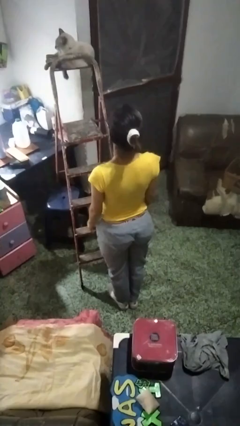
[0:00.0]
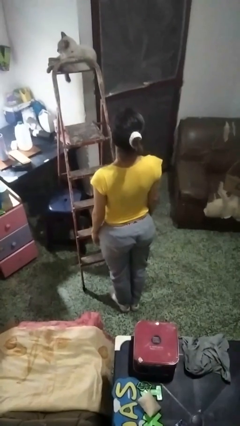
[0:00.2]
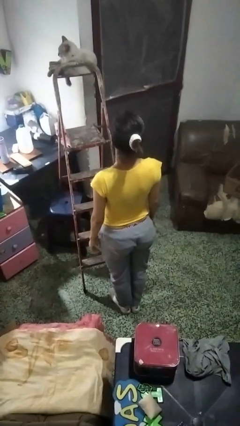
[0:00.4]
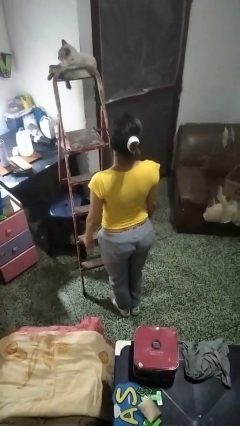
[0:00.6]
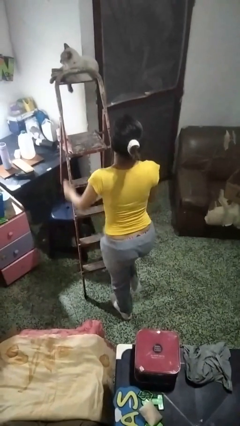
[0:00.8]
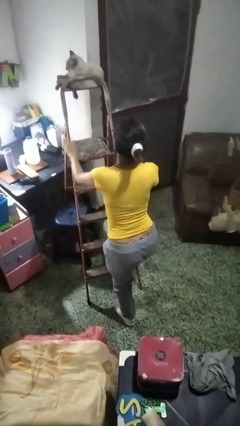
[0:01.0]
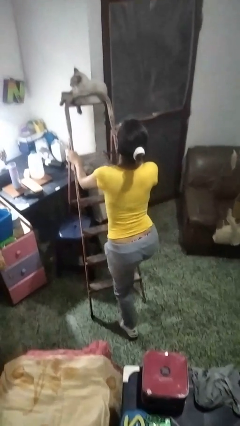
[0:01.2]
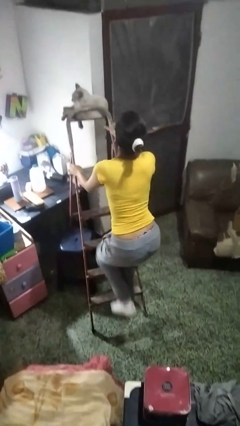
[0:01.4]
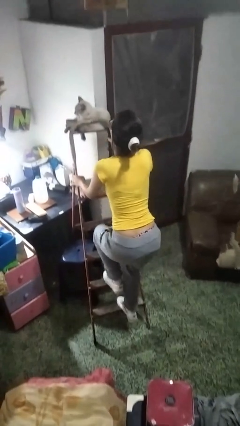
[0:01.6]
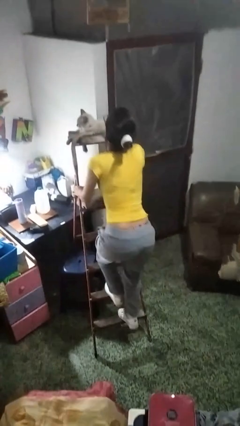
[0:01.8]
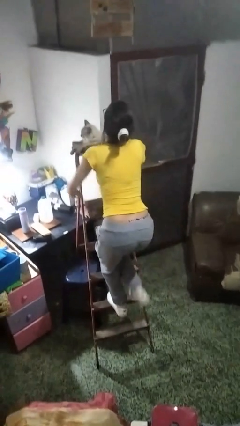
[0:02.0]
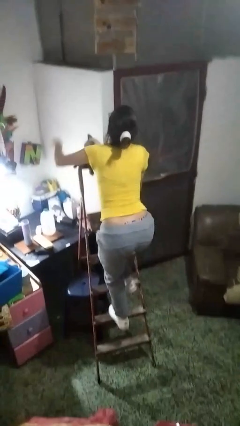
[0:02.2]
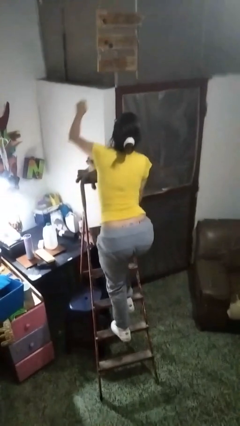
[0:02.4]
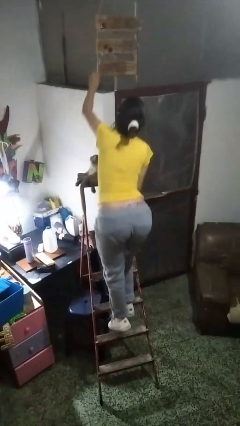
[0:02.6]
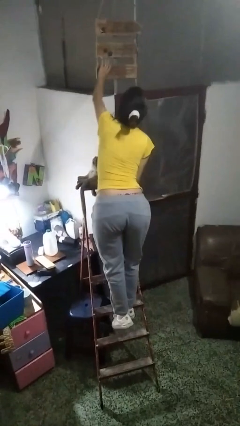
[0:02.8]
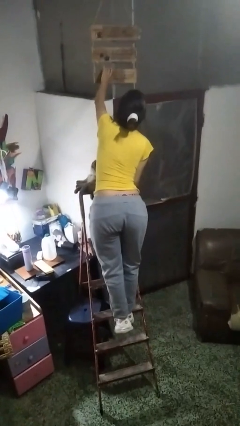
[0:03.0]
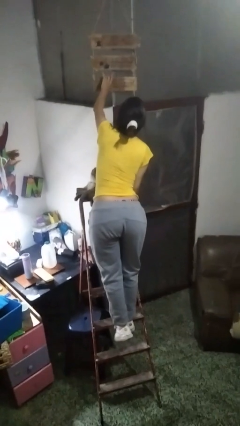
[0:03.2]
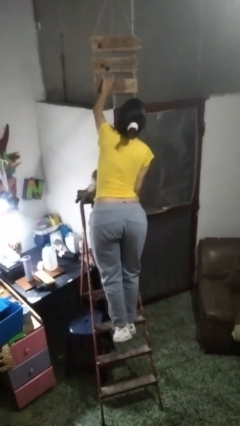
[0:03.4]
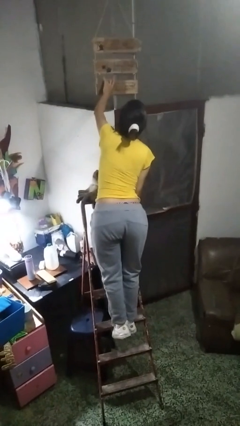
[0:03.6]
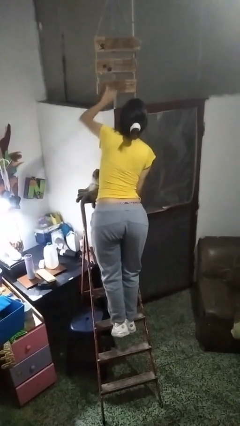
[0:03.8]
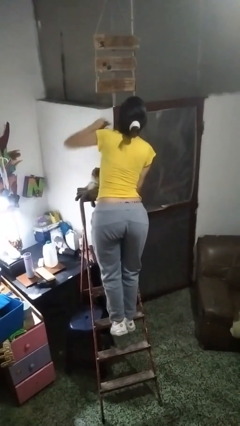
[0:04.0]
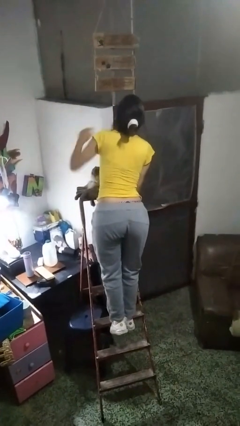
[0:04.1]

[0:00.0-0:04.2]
person climbs up ladder

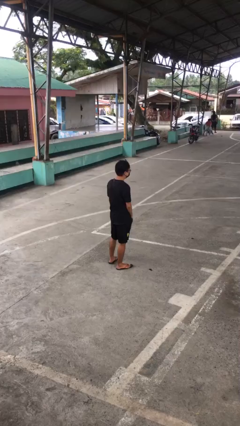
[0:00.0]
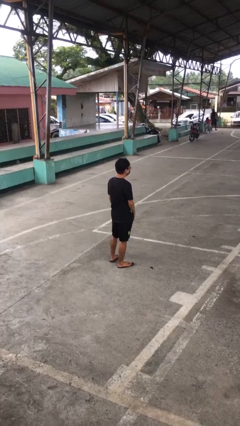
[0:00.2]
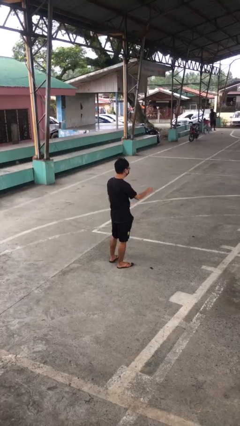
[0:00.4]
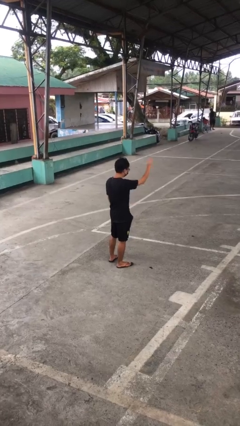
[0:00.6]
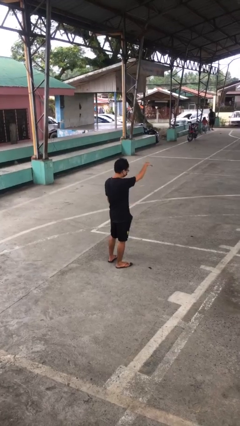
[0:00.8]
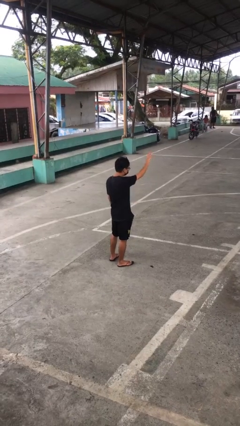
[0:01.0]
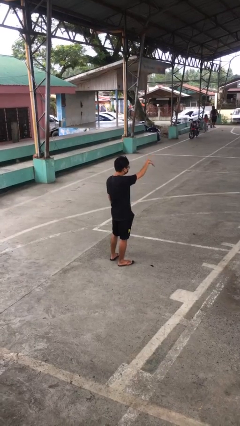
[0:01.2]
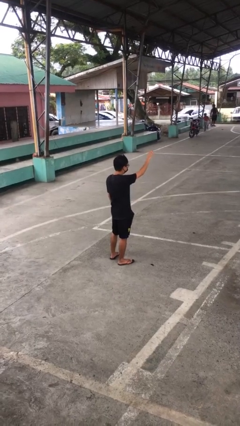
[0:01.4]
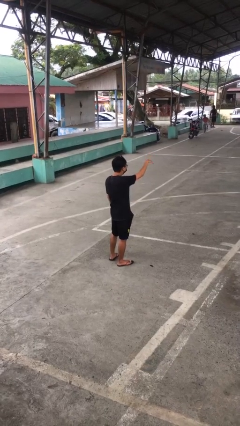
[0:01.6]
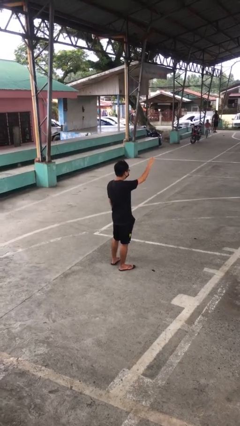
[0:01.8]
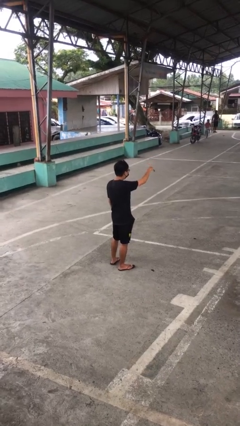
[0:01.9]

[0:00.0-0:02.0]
person gestures come here

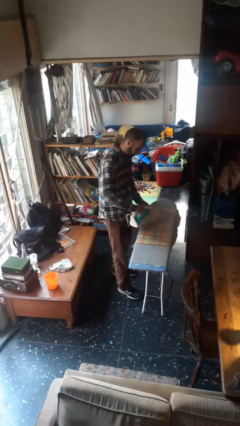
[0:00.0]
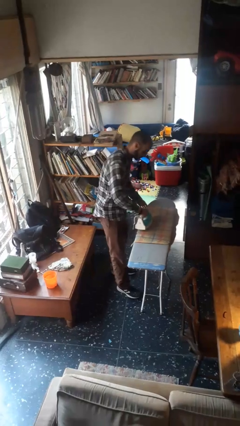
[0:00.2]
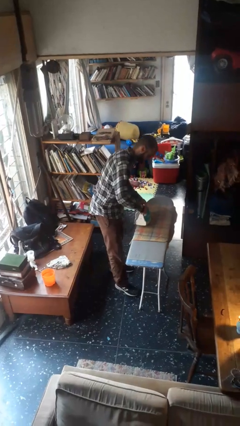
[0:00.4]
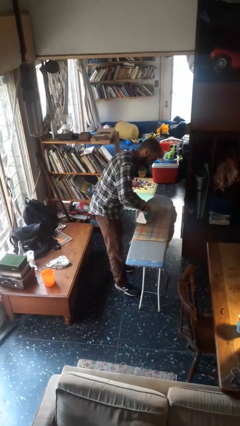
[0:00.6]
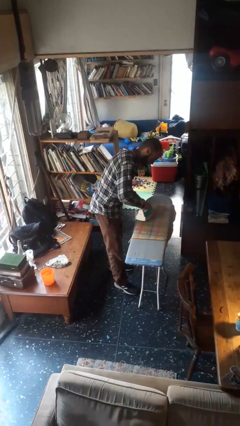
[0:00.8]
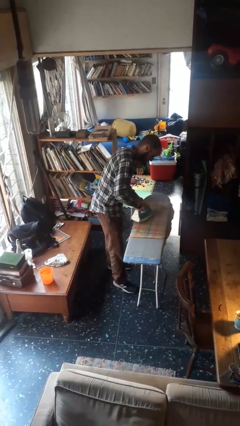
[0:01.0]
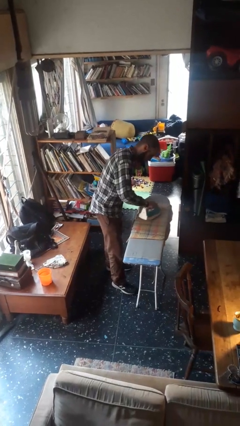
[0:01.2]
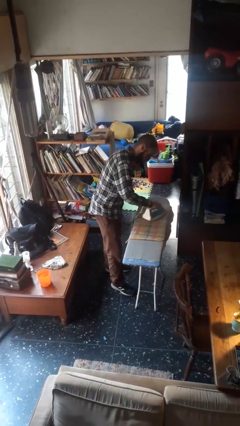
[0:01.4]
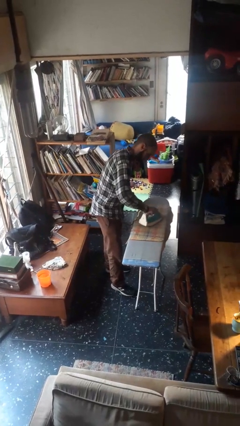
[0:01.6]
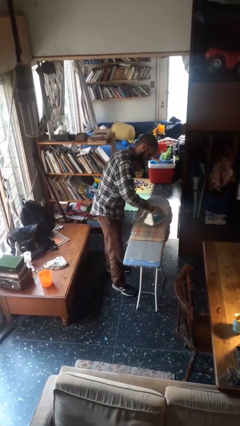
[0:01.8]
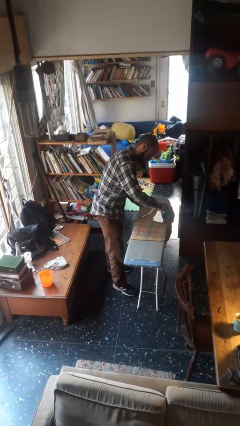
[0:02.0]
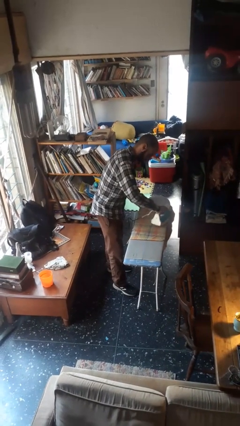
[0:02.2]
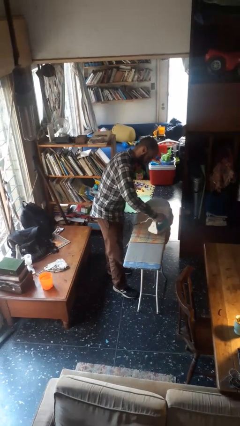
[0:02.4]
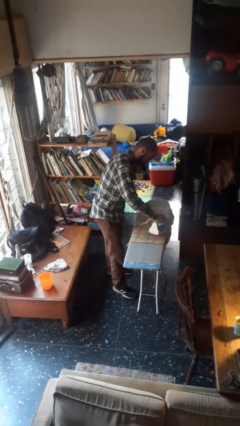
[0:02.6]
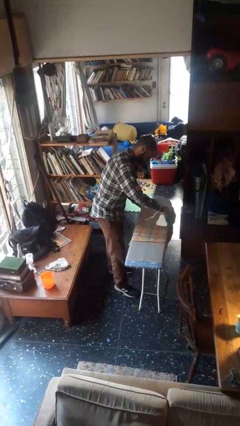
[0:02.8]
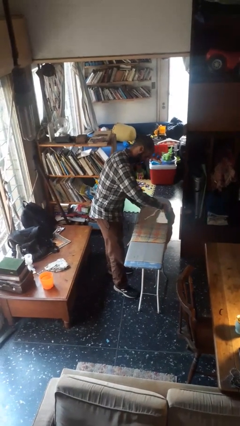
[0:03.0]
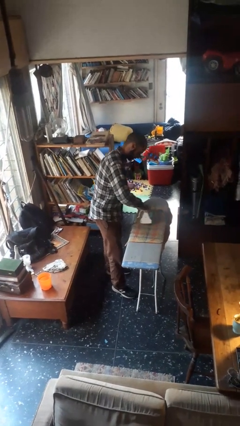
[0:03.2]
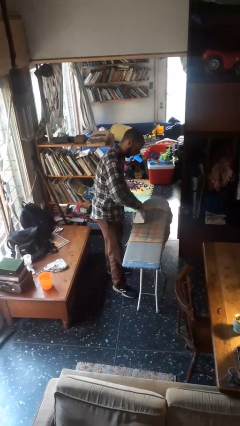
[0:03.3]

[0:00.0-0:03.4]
person irons clothes

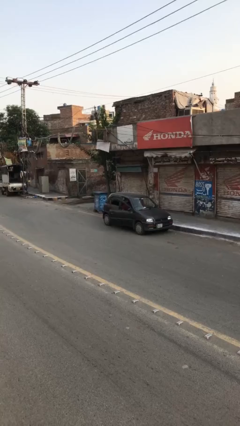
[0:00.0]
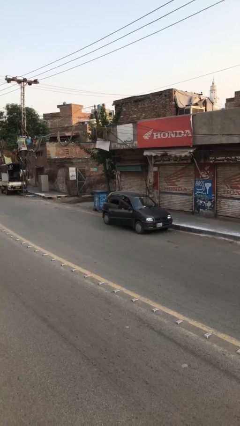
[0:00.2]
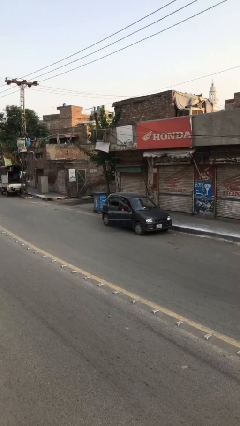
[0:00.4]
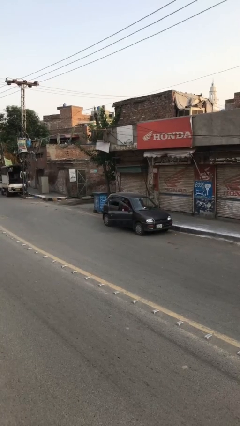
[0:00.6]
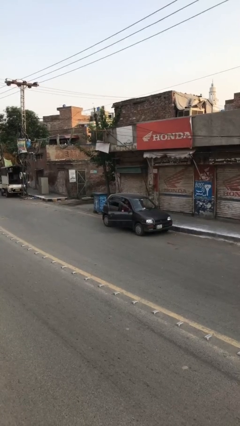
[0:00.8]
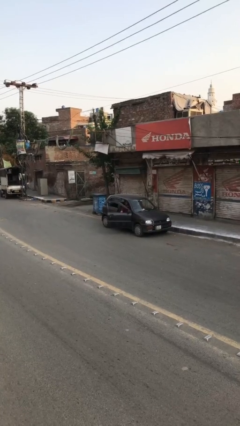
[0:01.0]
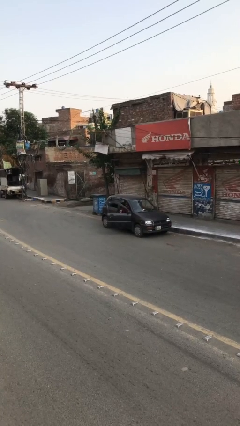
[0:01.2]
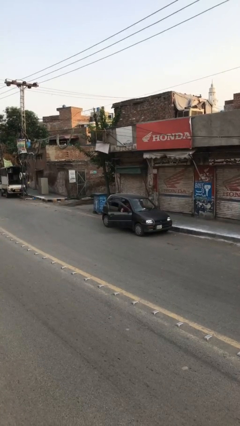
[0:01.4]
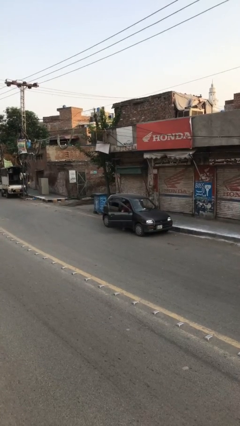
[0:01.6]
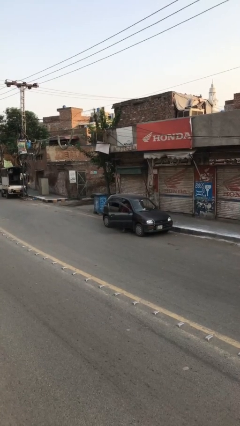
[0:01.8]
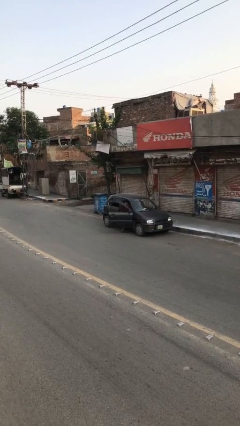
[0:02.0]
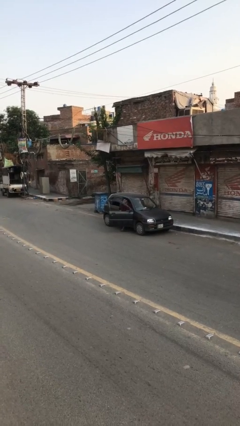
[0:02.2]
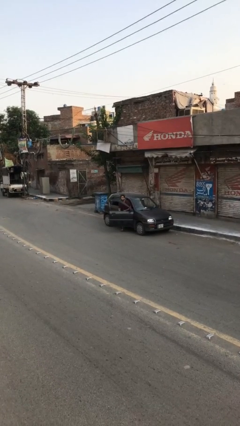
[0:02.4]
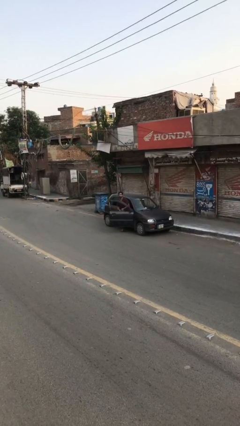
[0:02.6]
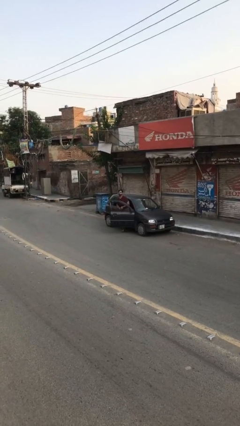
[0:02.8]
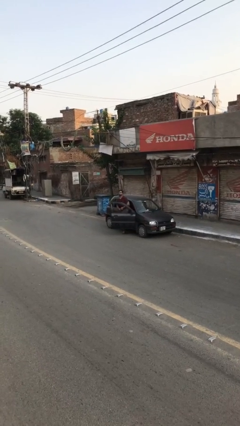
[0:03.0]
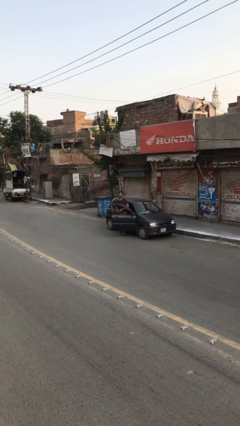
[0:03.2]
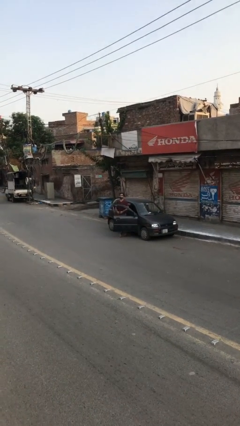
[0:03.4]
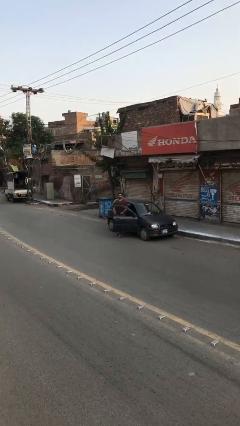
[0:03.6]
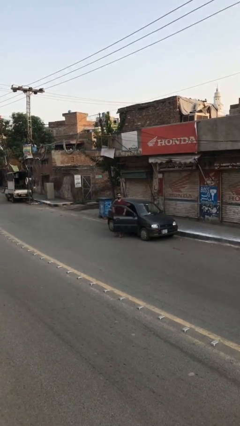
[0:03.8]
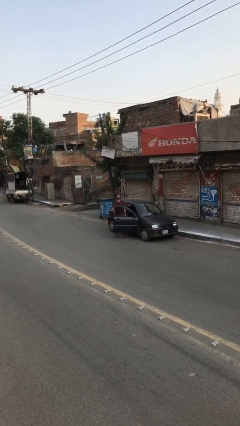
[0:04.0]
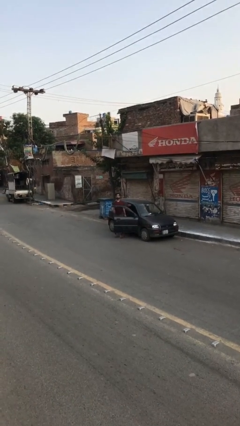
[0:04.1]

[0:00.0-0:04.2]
person exits car

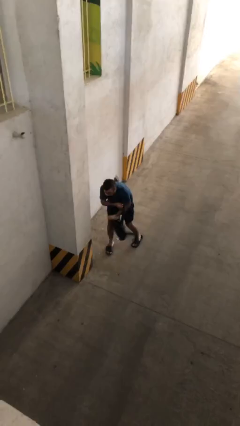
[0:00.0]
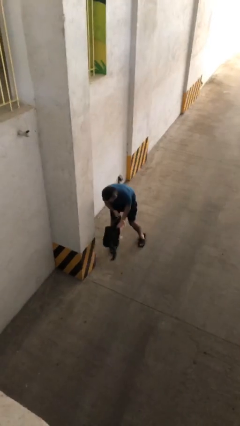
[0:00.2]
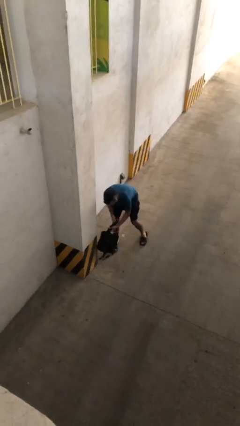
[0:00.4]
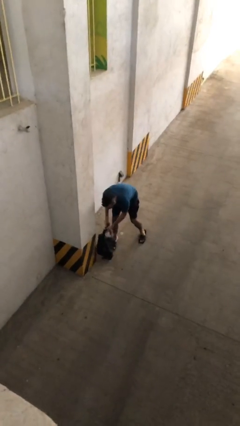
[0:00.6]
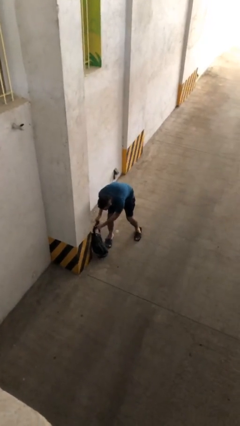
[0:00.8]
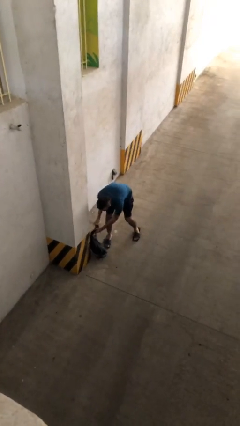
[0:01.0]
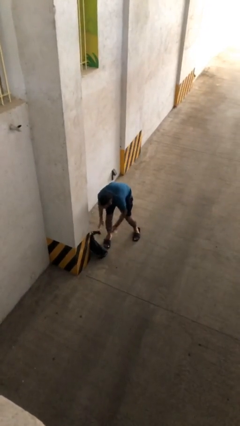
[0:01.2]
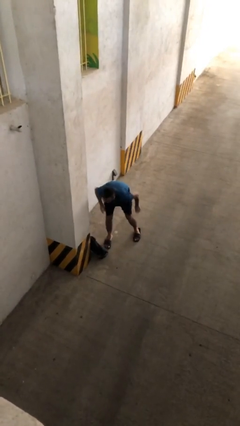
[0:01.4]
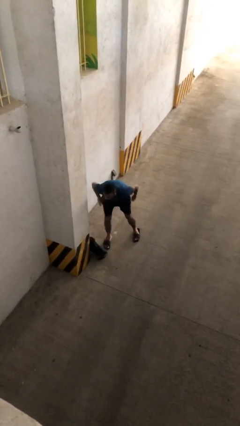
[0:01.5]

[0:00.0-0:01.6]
person puts down object on floor

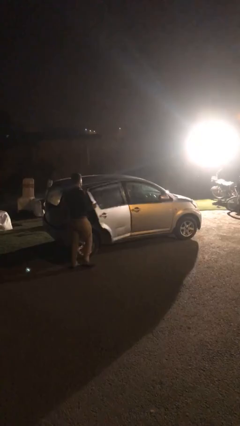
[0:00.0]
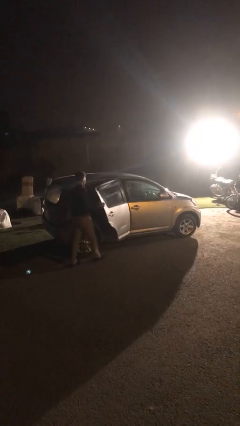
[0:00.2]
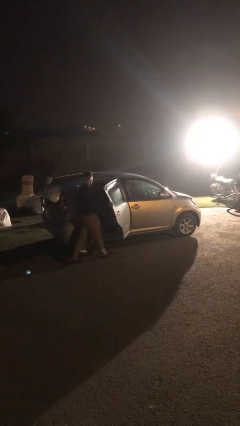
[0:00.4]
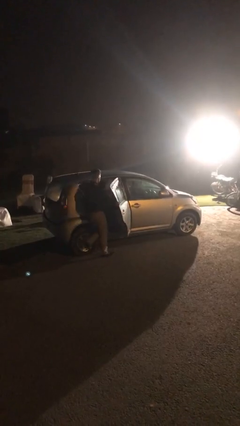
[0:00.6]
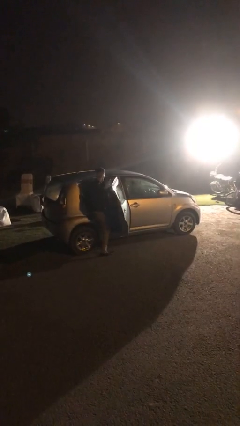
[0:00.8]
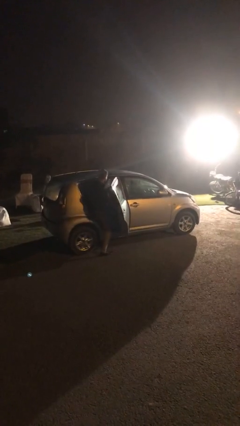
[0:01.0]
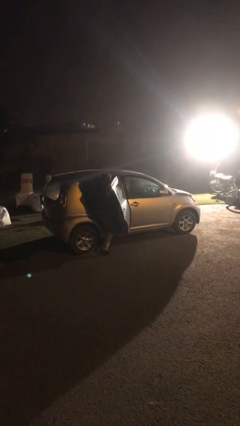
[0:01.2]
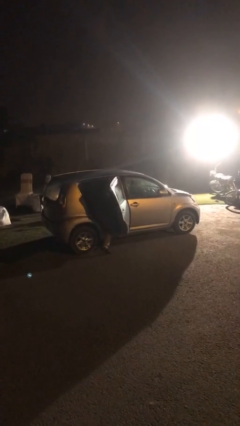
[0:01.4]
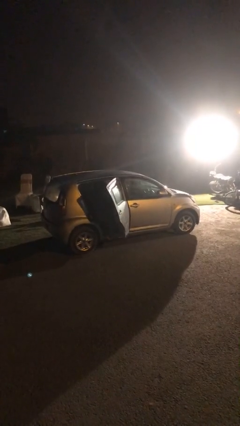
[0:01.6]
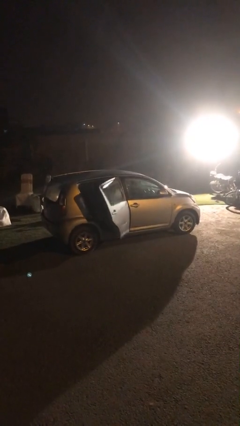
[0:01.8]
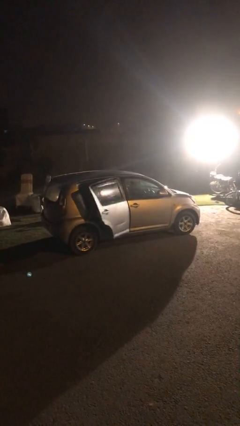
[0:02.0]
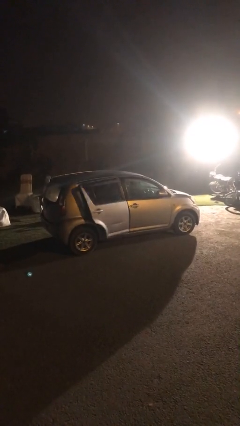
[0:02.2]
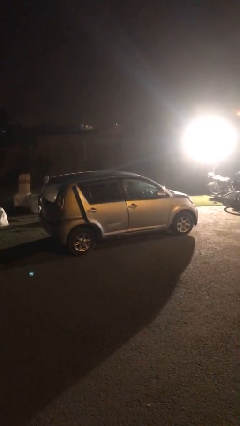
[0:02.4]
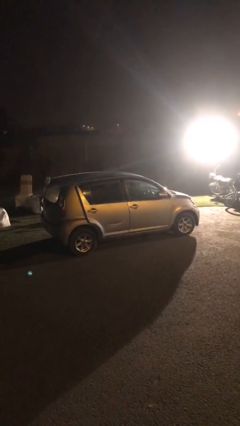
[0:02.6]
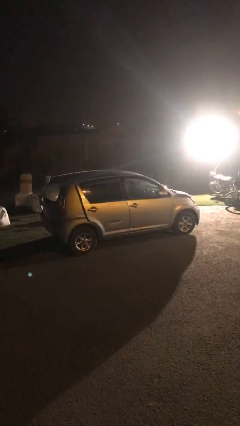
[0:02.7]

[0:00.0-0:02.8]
car picks up person
